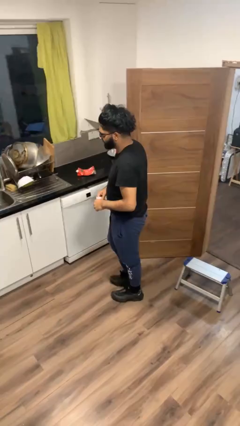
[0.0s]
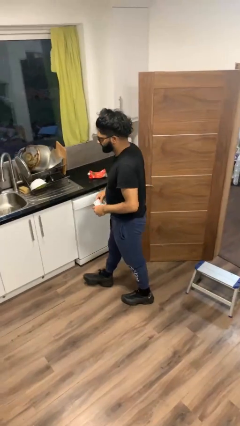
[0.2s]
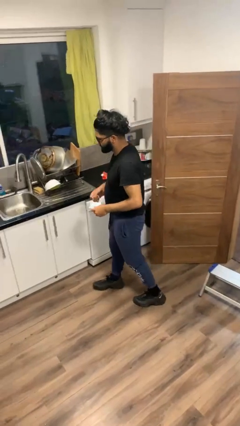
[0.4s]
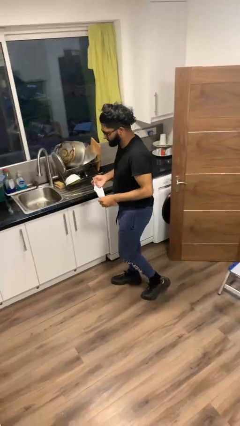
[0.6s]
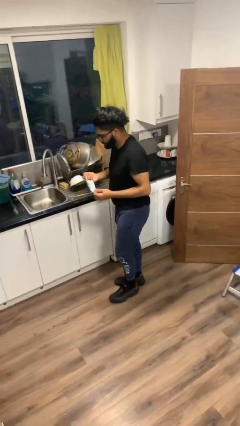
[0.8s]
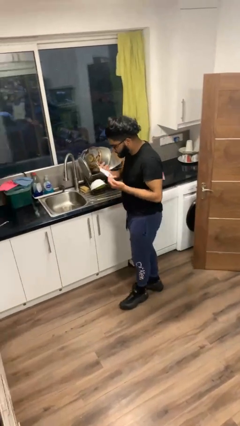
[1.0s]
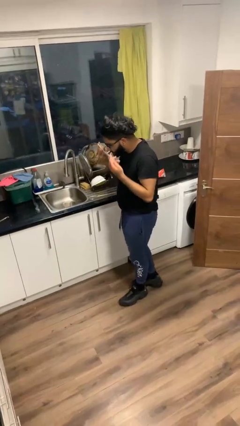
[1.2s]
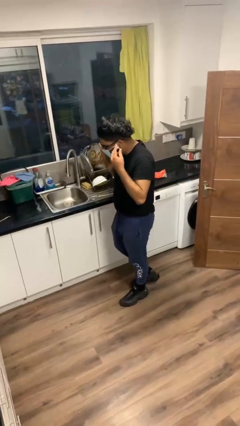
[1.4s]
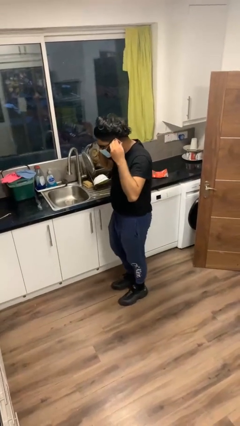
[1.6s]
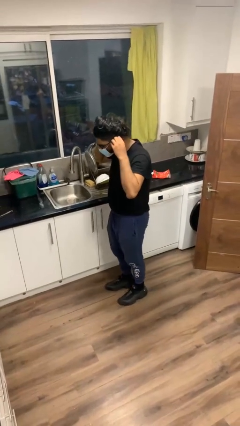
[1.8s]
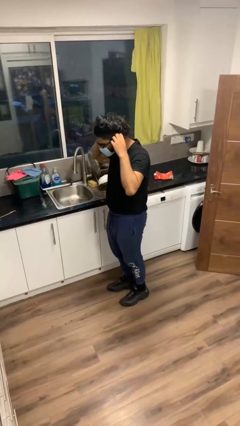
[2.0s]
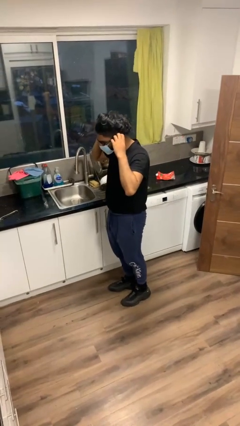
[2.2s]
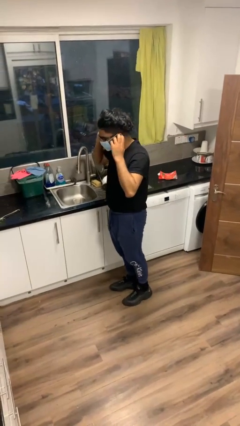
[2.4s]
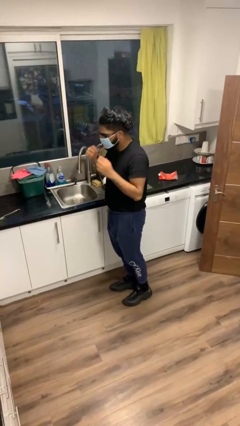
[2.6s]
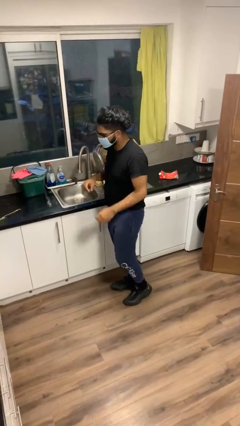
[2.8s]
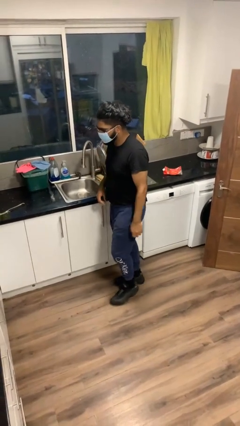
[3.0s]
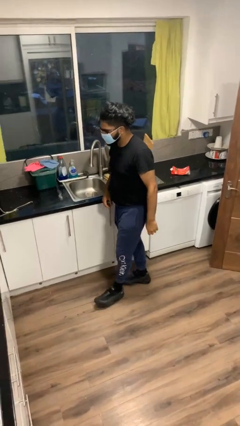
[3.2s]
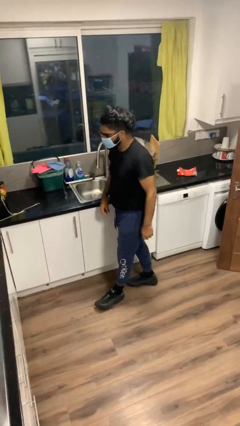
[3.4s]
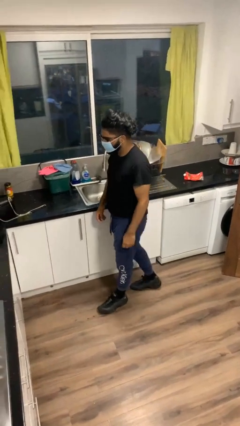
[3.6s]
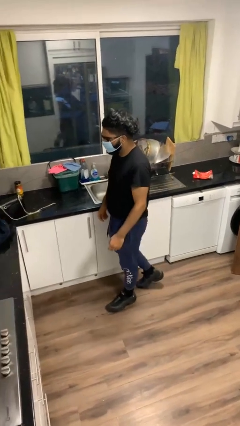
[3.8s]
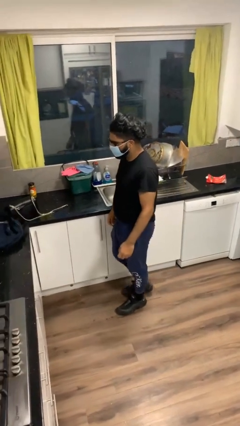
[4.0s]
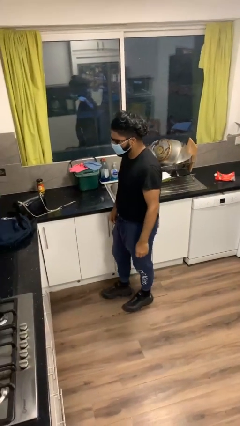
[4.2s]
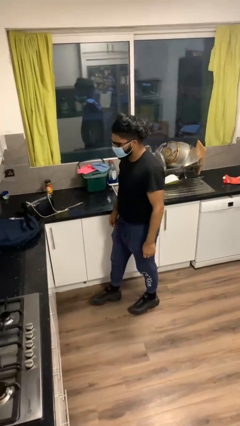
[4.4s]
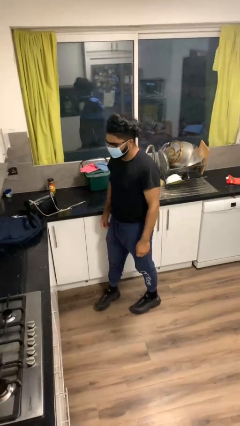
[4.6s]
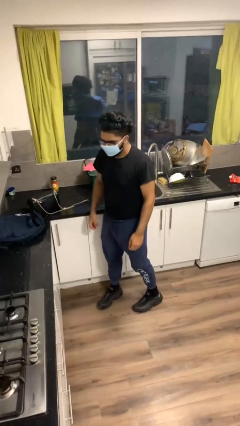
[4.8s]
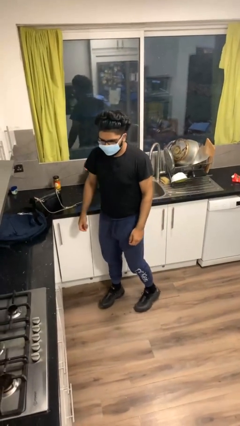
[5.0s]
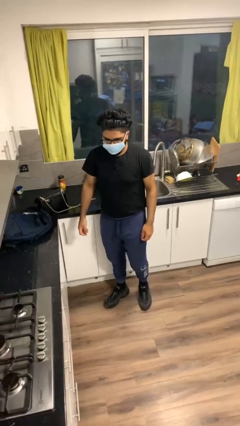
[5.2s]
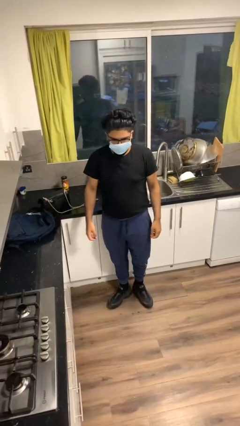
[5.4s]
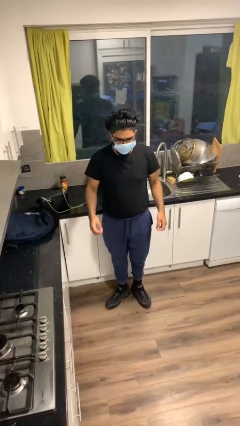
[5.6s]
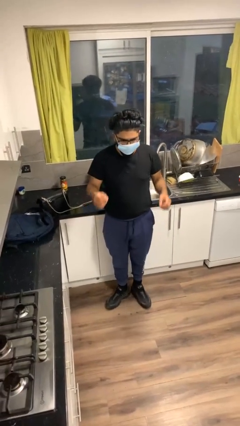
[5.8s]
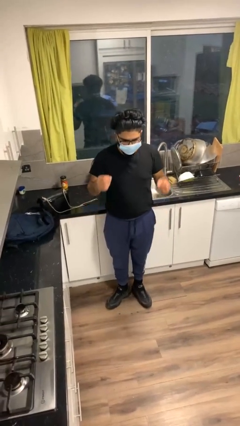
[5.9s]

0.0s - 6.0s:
person puts on facemask

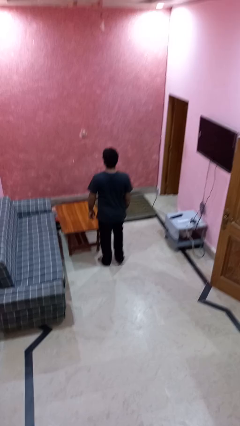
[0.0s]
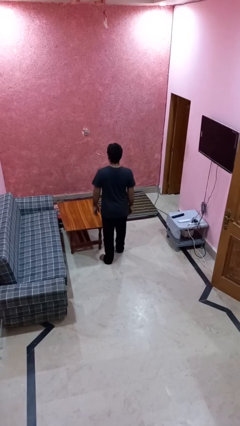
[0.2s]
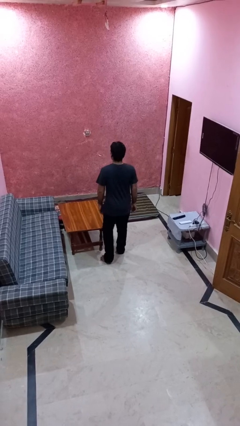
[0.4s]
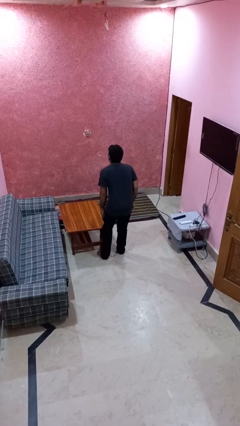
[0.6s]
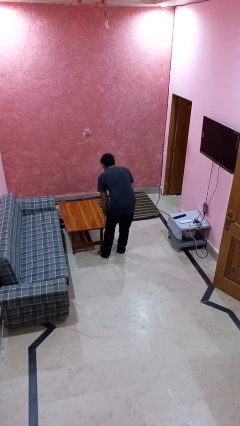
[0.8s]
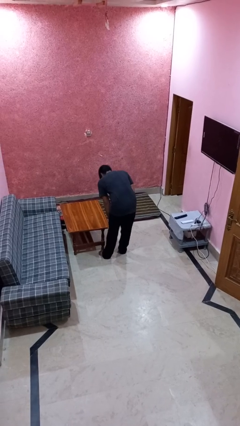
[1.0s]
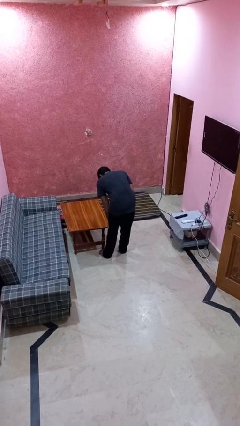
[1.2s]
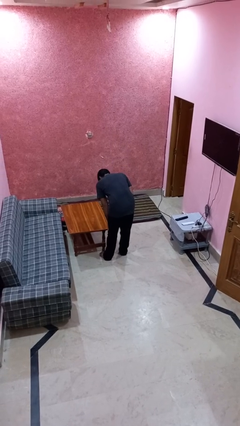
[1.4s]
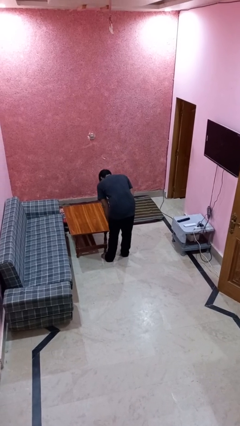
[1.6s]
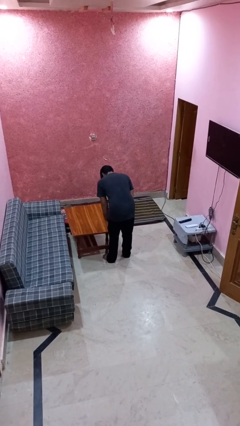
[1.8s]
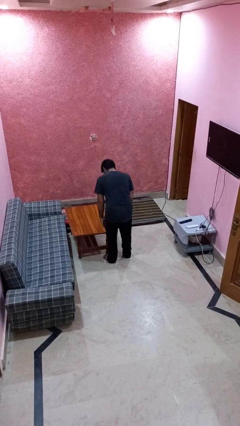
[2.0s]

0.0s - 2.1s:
person bumps into table

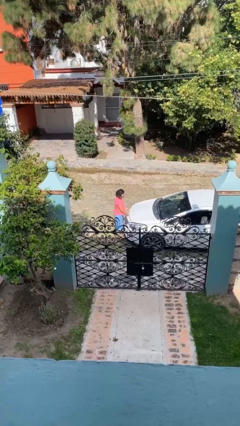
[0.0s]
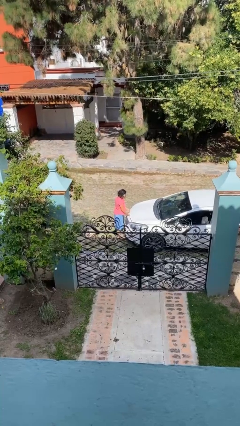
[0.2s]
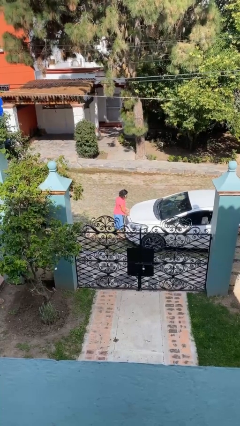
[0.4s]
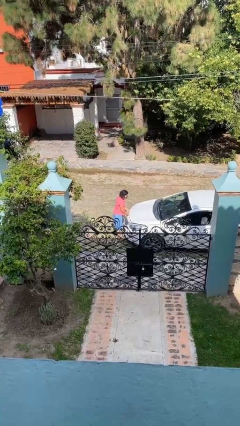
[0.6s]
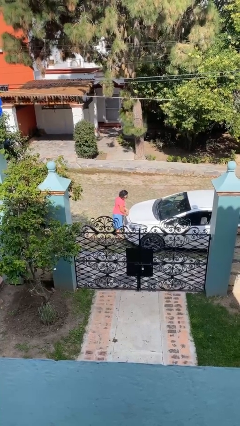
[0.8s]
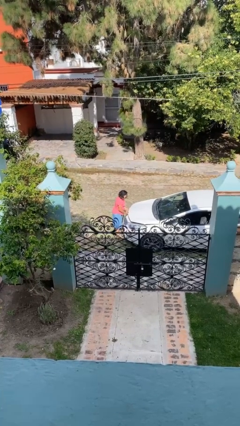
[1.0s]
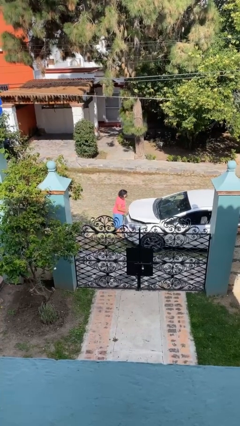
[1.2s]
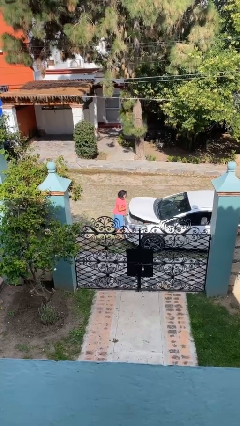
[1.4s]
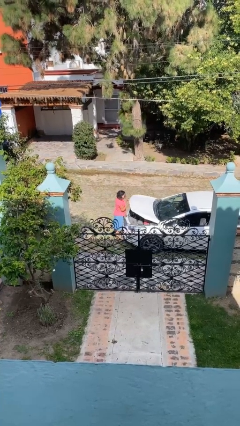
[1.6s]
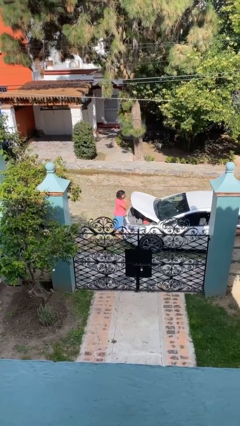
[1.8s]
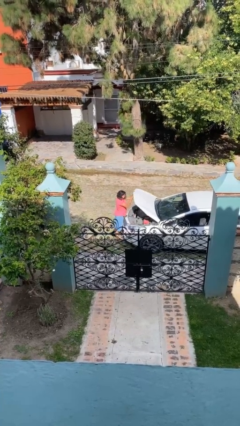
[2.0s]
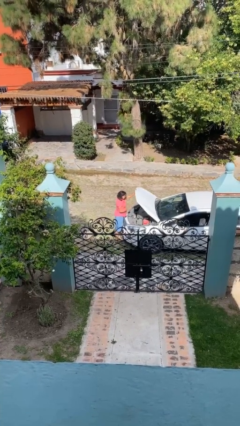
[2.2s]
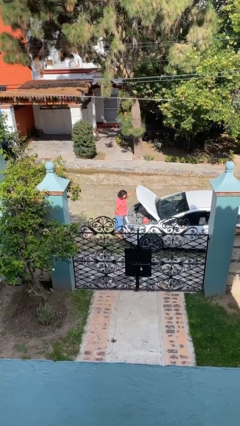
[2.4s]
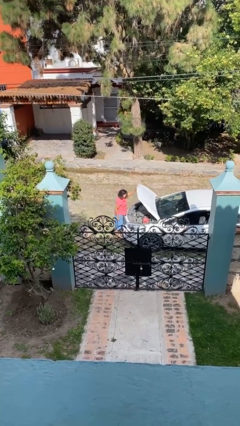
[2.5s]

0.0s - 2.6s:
person opens car hood

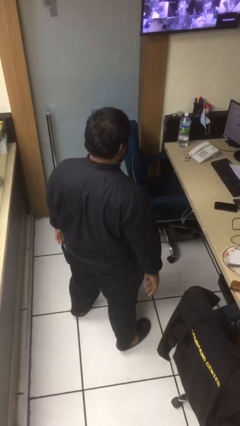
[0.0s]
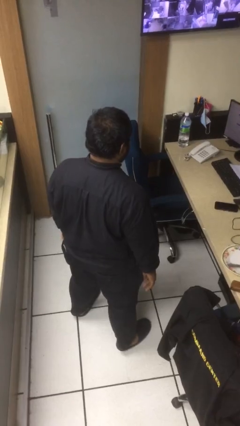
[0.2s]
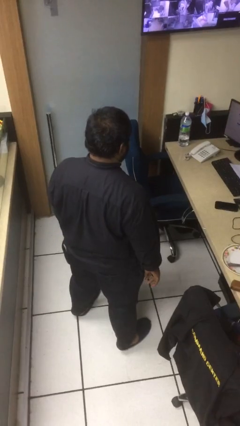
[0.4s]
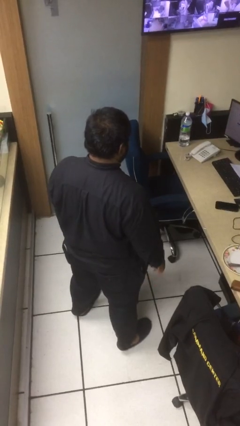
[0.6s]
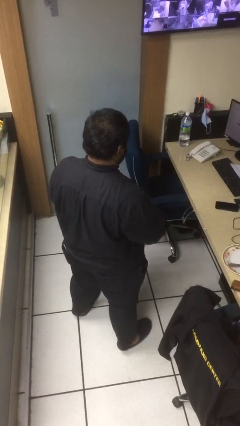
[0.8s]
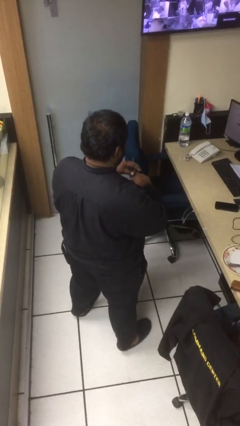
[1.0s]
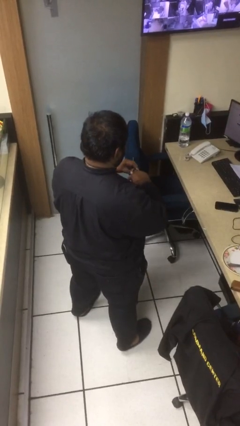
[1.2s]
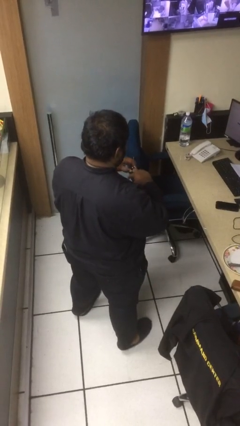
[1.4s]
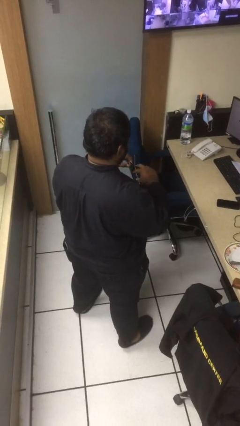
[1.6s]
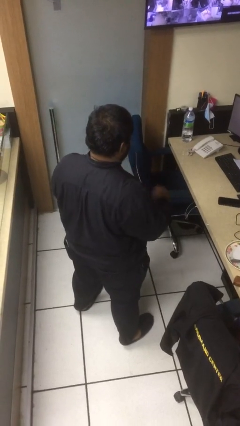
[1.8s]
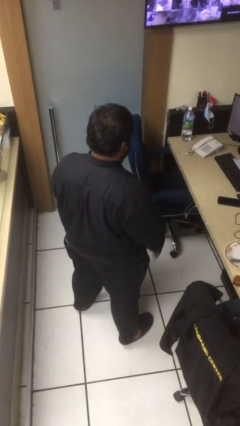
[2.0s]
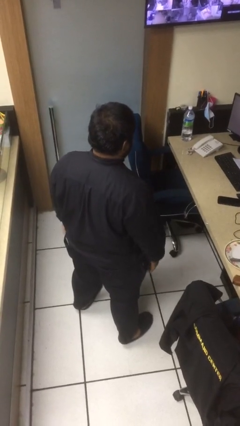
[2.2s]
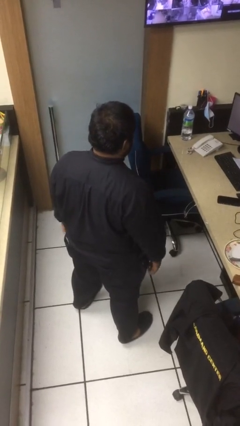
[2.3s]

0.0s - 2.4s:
person takes off ring

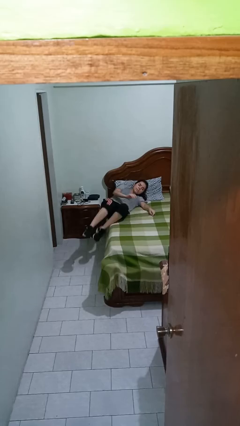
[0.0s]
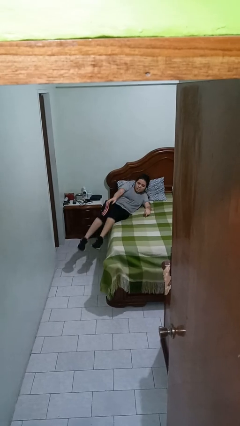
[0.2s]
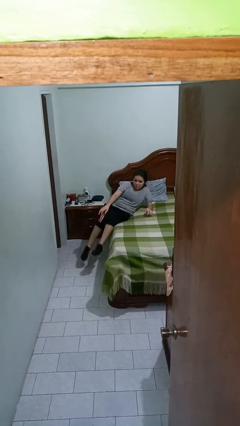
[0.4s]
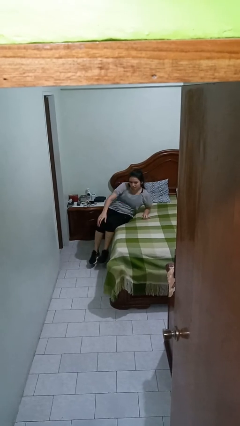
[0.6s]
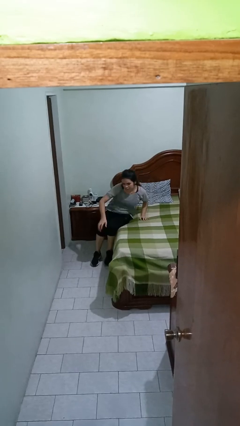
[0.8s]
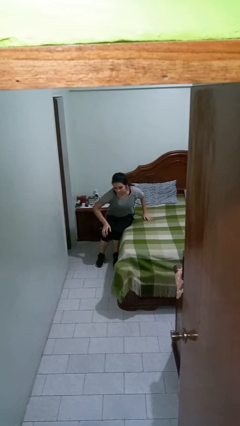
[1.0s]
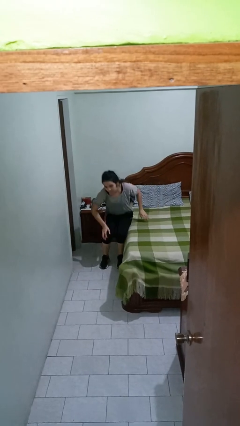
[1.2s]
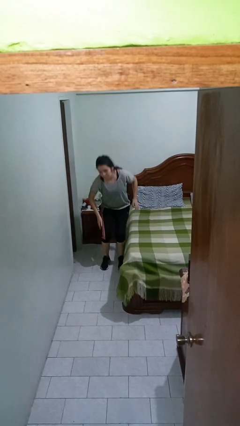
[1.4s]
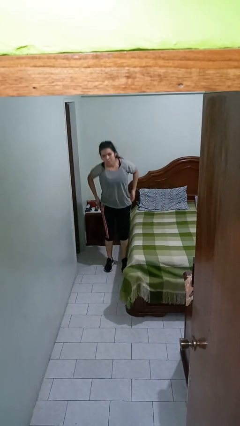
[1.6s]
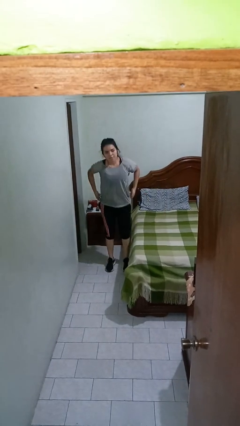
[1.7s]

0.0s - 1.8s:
person stands up

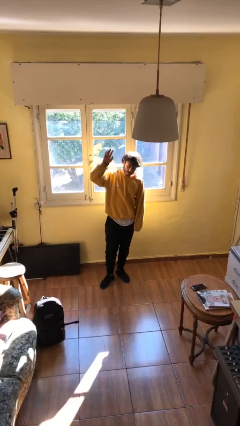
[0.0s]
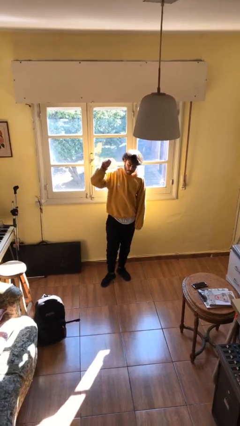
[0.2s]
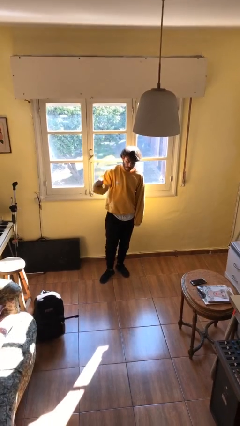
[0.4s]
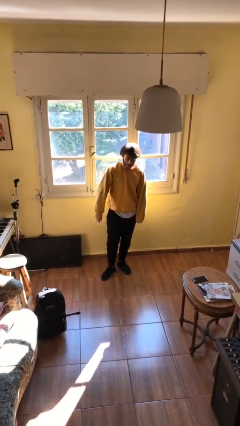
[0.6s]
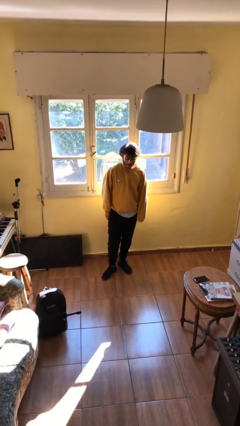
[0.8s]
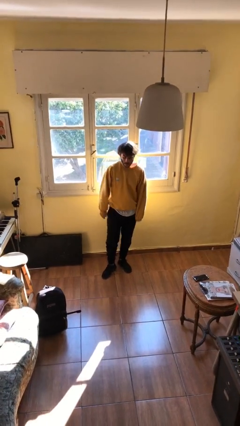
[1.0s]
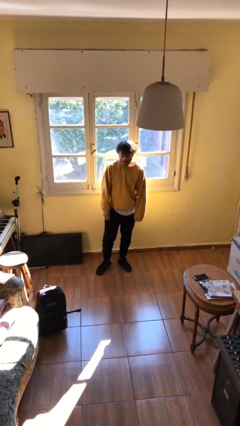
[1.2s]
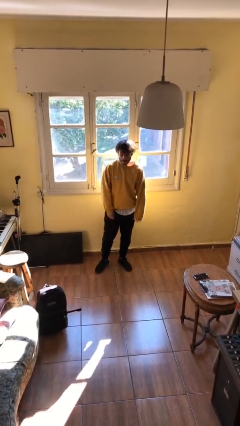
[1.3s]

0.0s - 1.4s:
person gestures lower hand

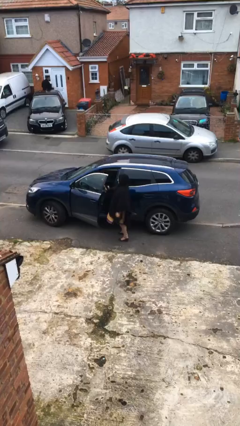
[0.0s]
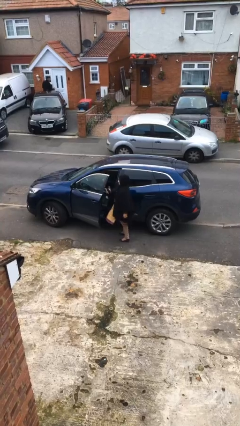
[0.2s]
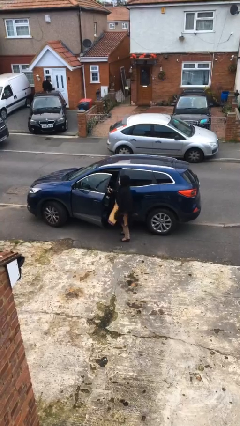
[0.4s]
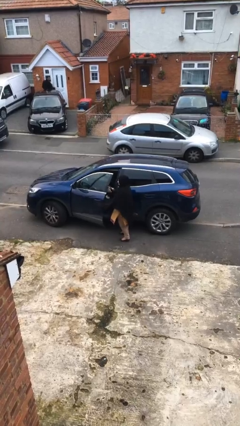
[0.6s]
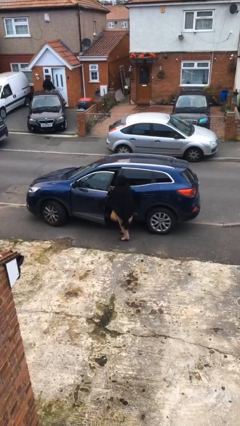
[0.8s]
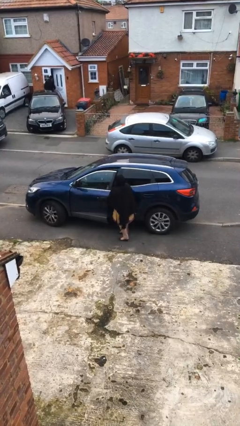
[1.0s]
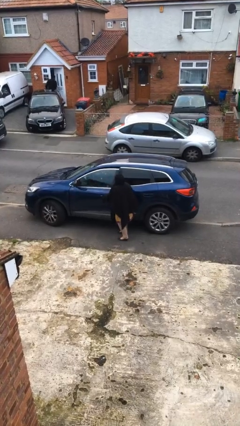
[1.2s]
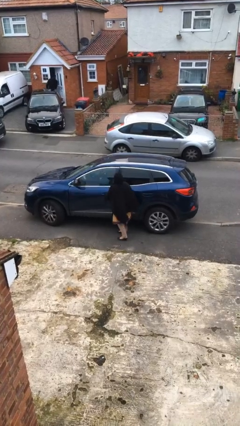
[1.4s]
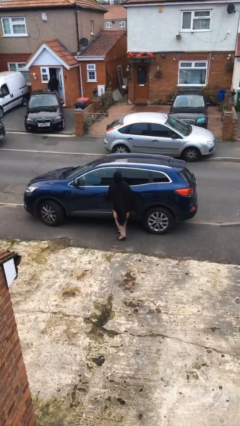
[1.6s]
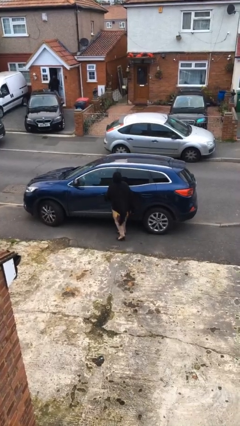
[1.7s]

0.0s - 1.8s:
person closes car door
